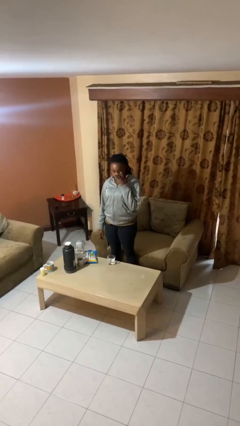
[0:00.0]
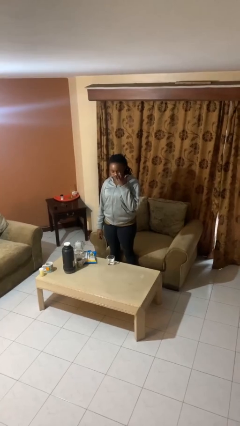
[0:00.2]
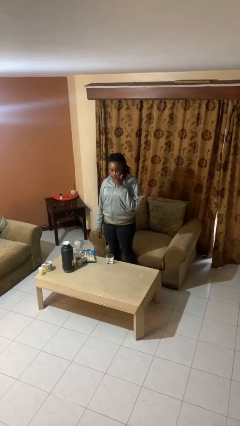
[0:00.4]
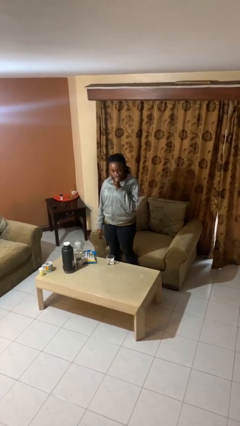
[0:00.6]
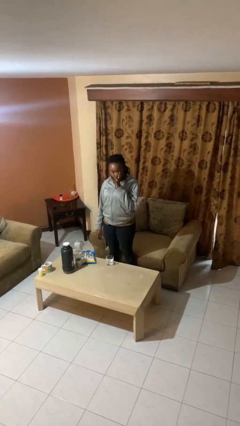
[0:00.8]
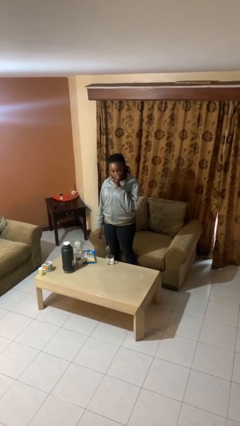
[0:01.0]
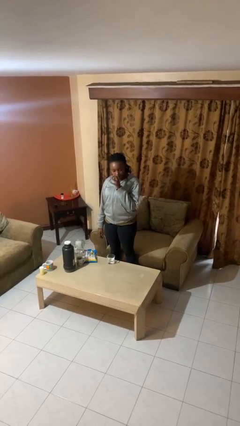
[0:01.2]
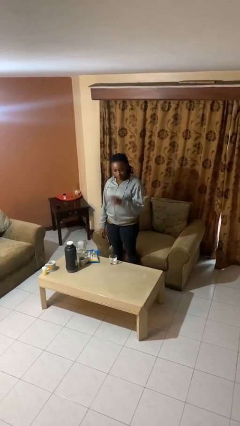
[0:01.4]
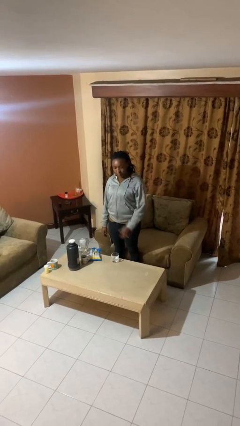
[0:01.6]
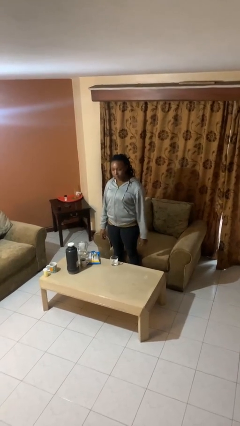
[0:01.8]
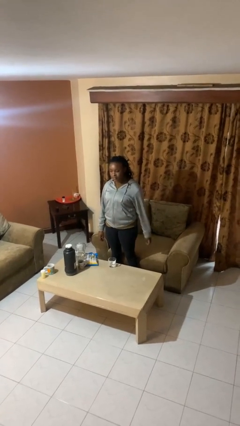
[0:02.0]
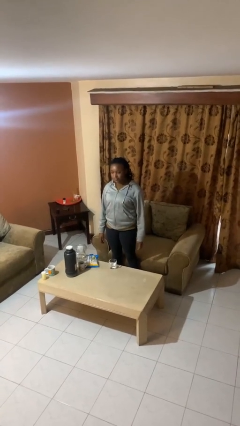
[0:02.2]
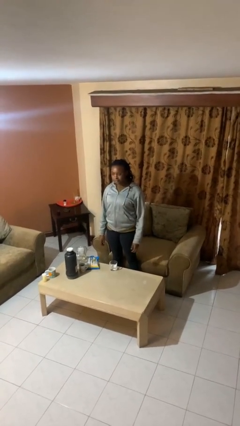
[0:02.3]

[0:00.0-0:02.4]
person licks fingers

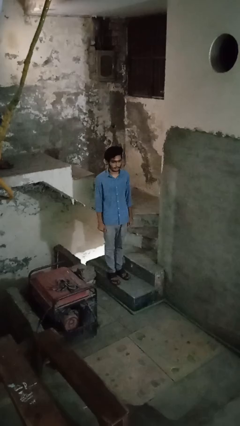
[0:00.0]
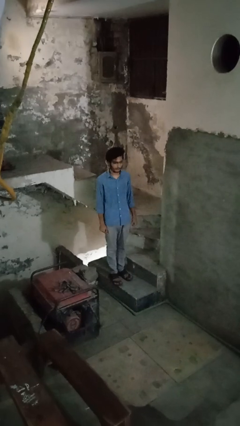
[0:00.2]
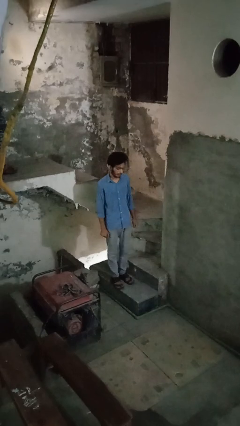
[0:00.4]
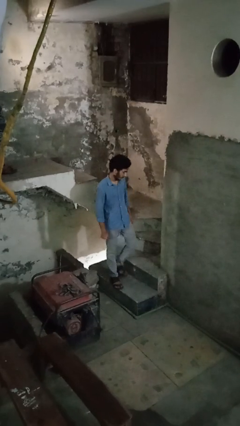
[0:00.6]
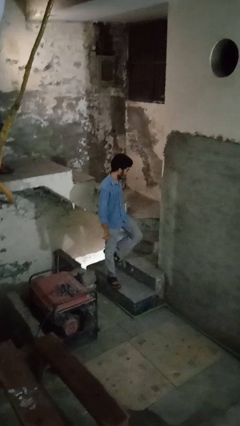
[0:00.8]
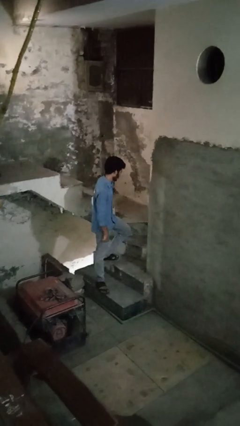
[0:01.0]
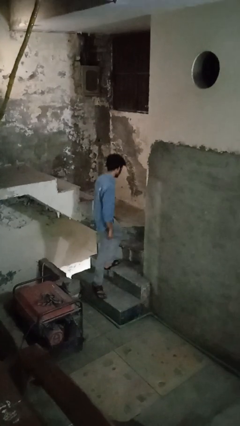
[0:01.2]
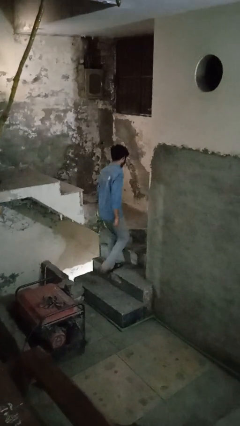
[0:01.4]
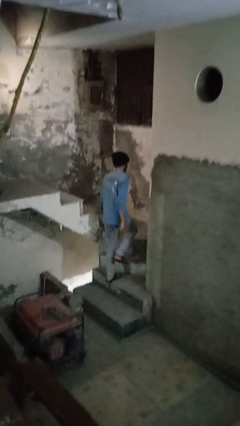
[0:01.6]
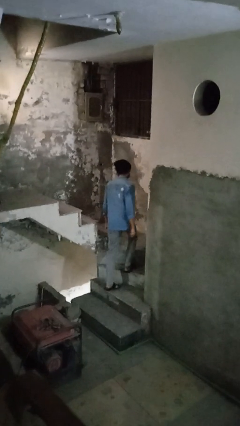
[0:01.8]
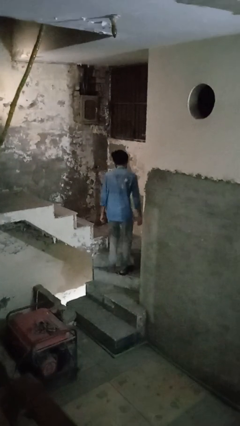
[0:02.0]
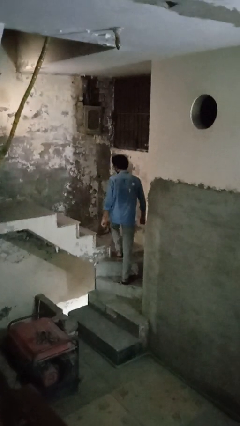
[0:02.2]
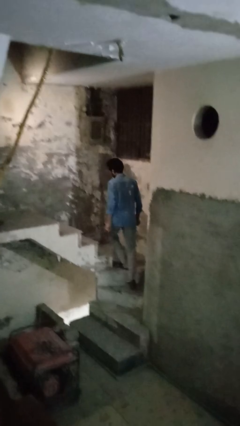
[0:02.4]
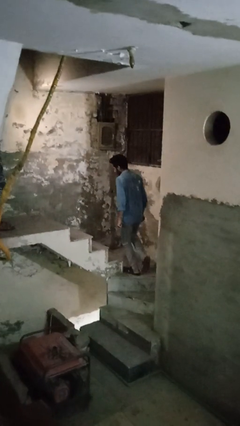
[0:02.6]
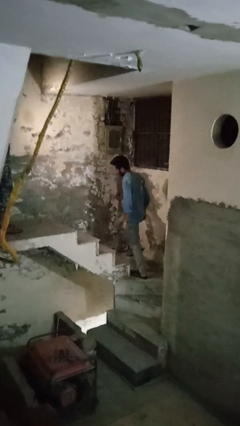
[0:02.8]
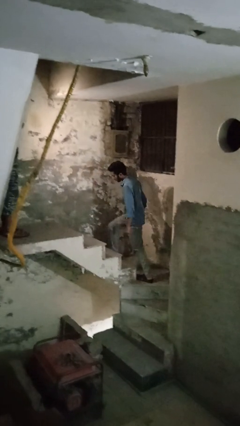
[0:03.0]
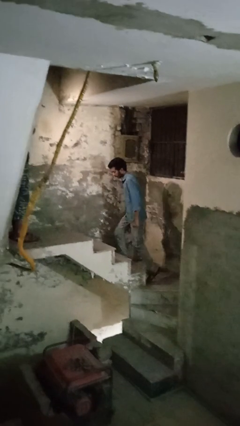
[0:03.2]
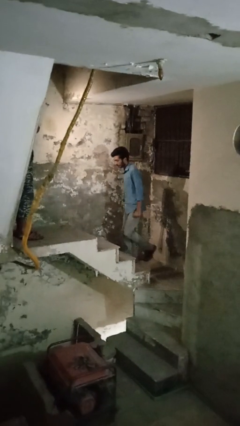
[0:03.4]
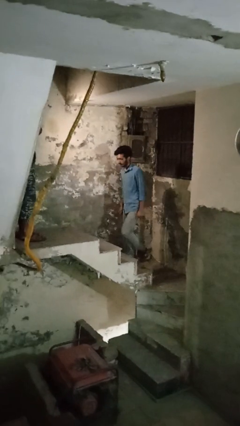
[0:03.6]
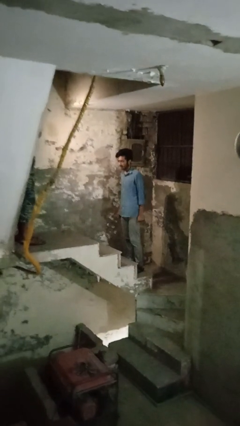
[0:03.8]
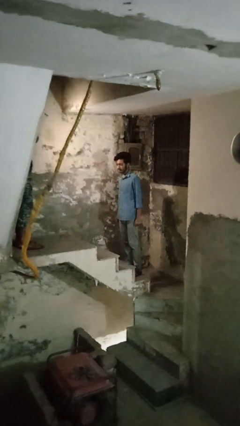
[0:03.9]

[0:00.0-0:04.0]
person climbs up stairs

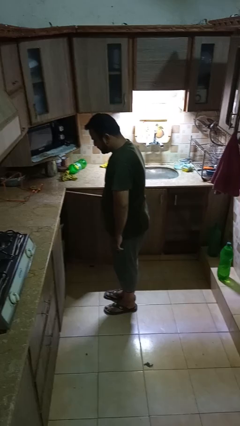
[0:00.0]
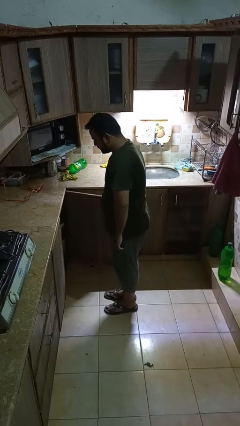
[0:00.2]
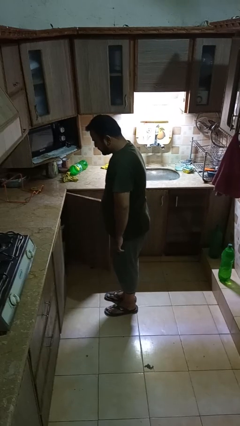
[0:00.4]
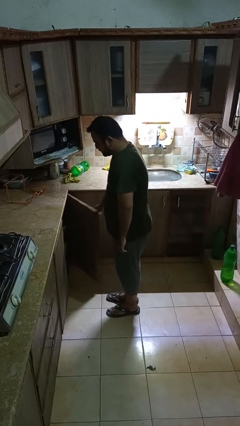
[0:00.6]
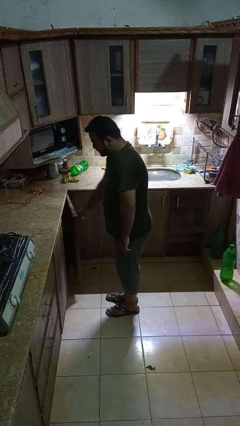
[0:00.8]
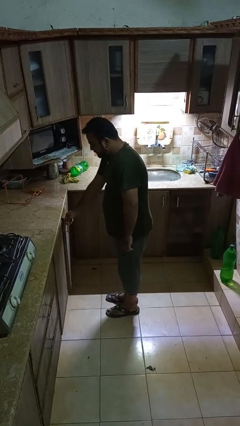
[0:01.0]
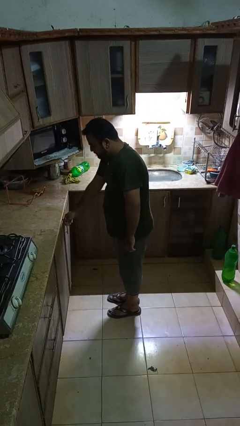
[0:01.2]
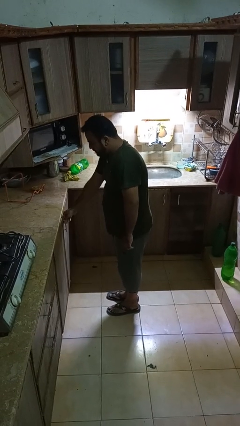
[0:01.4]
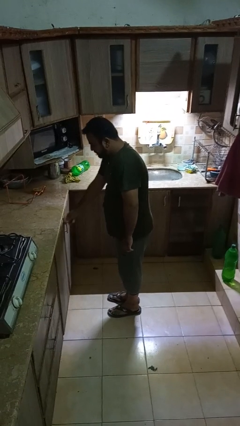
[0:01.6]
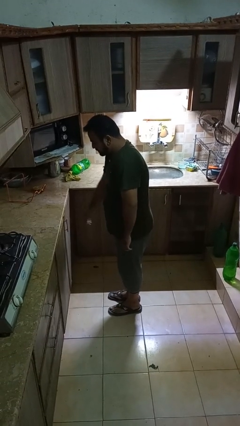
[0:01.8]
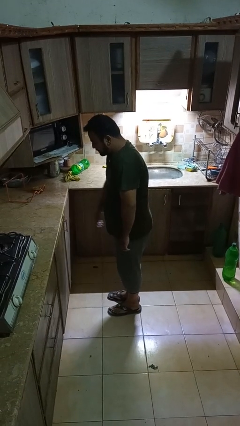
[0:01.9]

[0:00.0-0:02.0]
person closes cabinet

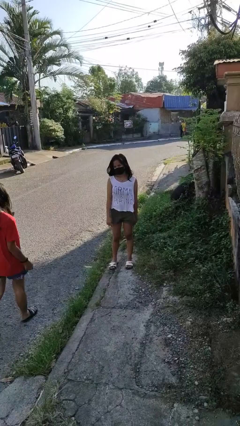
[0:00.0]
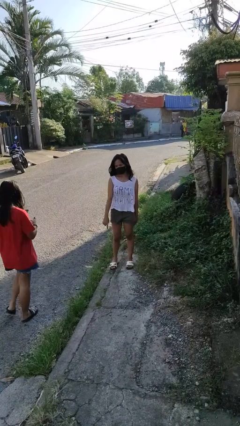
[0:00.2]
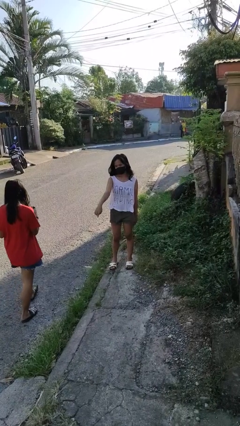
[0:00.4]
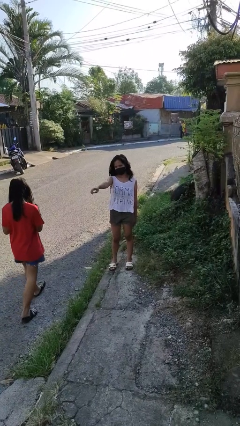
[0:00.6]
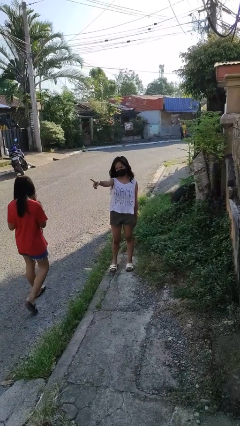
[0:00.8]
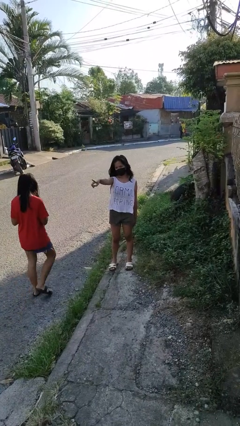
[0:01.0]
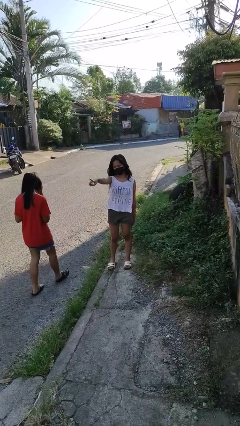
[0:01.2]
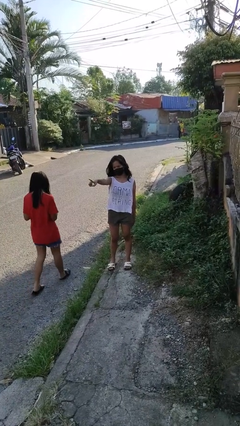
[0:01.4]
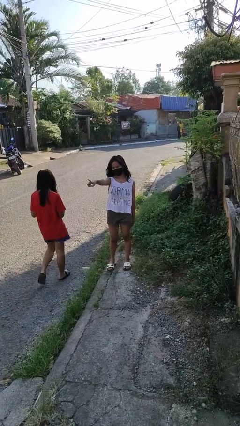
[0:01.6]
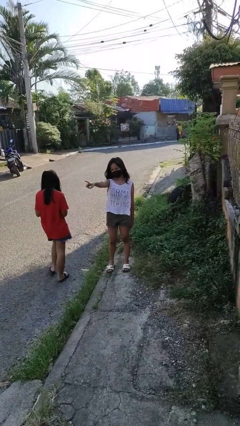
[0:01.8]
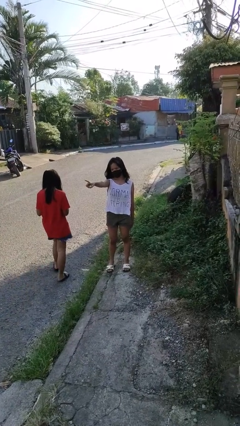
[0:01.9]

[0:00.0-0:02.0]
person points at person

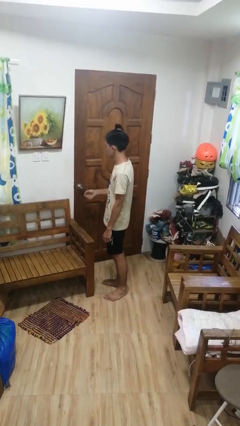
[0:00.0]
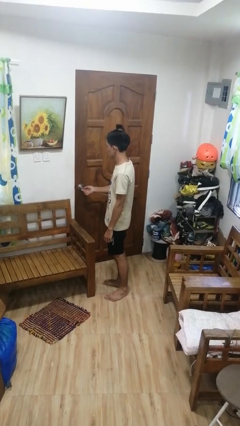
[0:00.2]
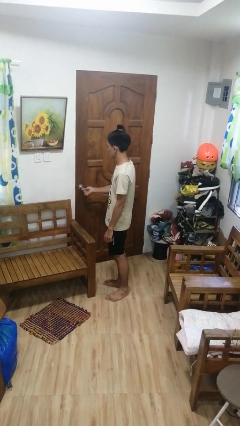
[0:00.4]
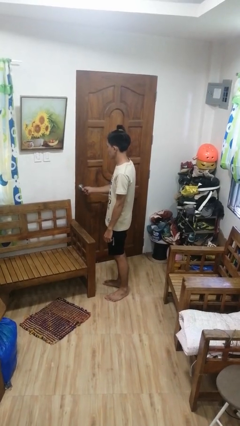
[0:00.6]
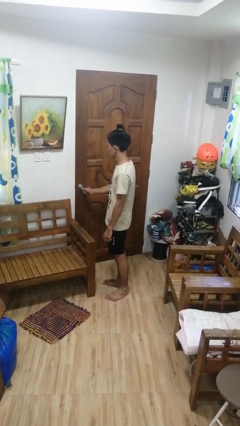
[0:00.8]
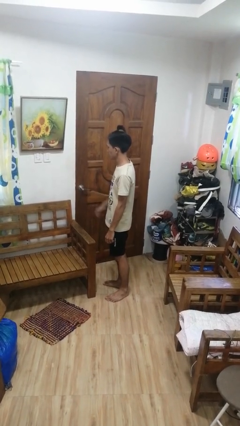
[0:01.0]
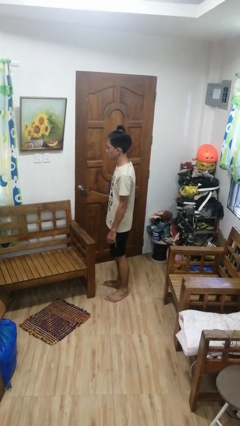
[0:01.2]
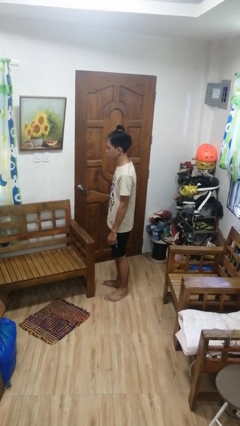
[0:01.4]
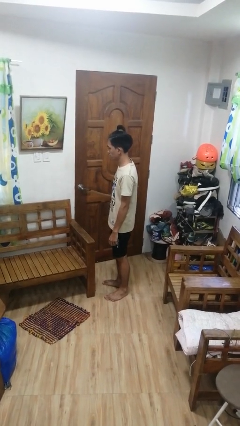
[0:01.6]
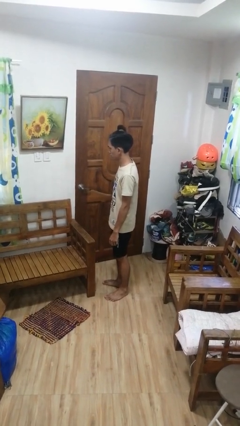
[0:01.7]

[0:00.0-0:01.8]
person locks door with keys

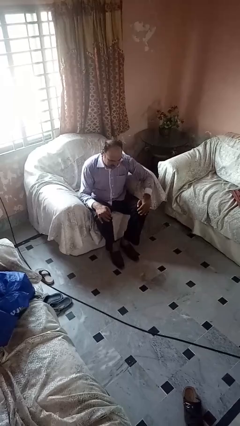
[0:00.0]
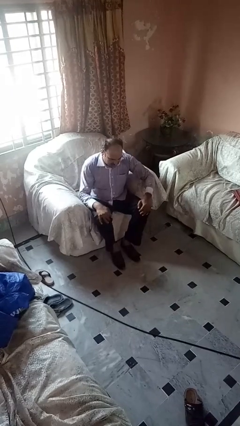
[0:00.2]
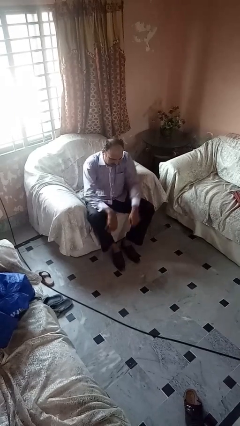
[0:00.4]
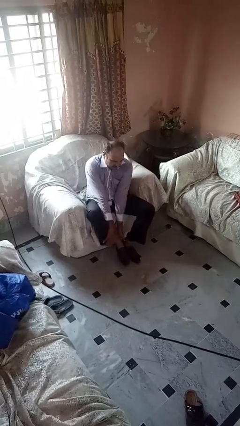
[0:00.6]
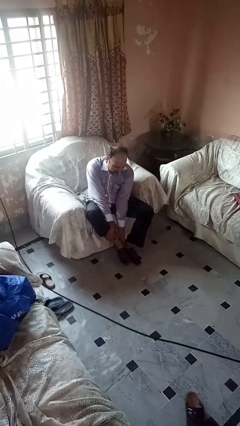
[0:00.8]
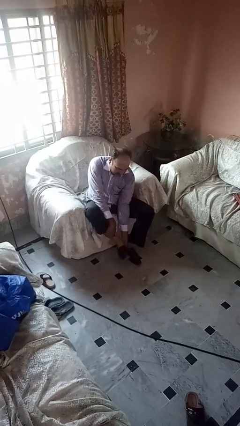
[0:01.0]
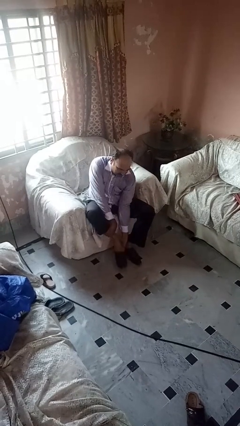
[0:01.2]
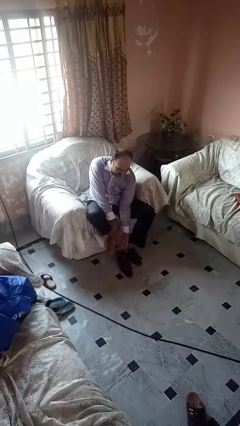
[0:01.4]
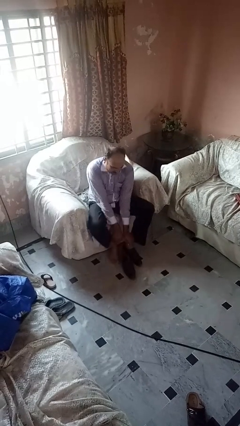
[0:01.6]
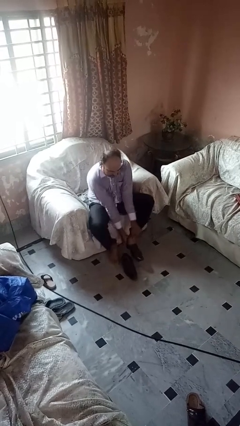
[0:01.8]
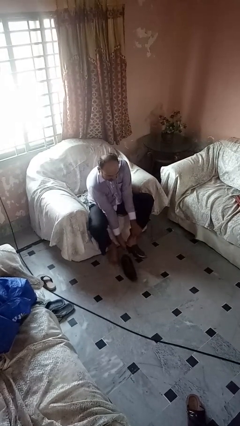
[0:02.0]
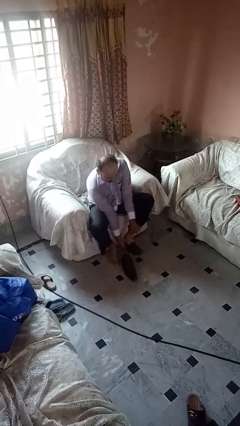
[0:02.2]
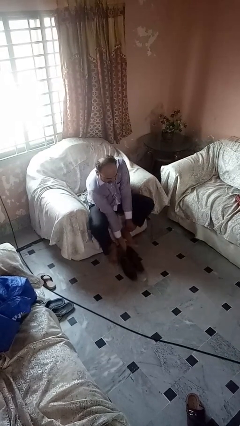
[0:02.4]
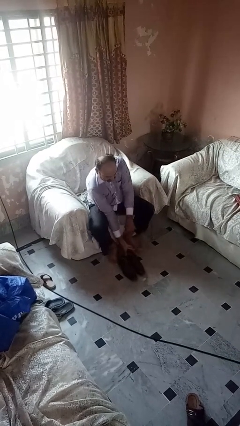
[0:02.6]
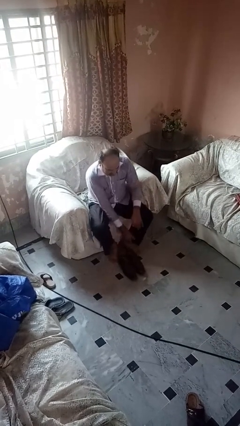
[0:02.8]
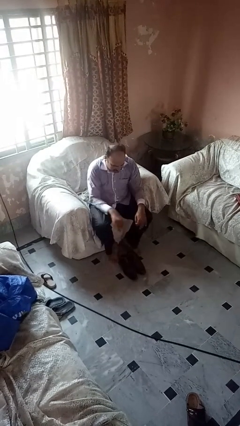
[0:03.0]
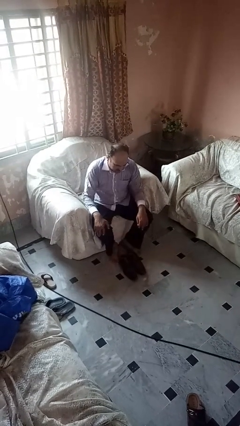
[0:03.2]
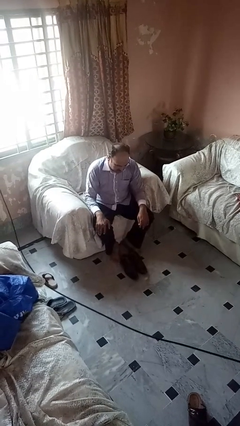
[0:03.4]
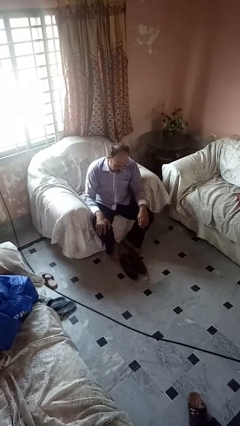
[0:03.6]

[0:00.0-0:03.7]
person takes off boots

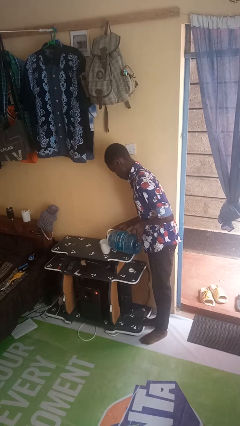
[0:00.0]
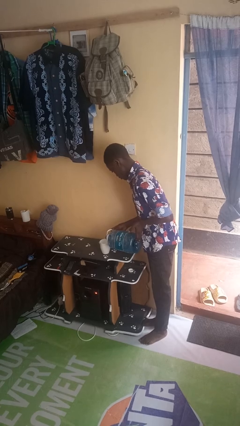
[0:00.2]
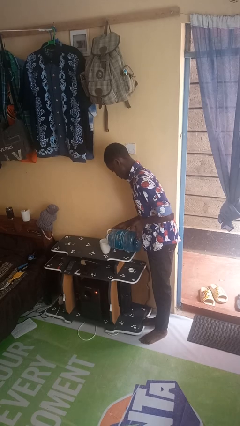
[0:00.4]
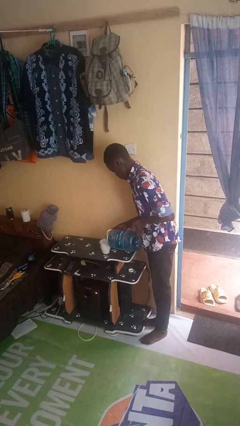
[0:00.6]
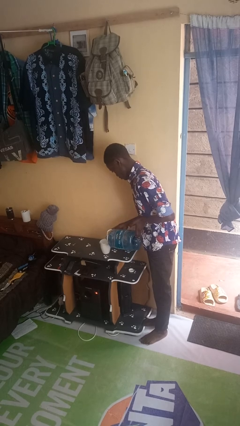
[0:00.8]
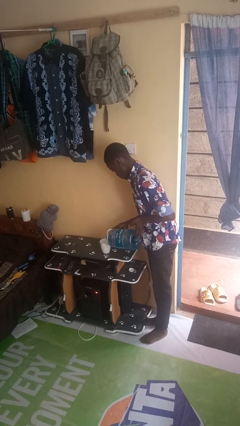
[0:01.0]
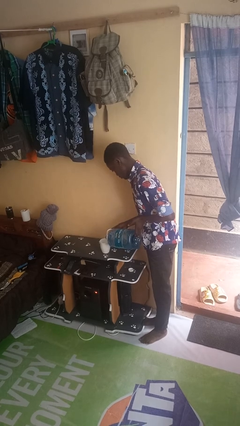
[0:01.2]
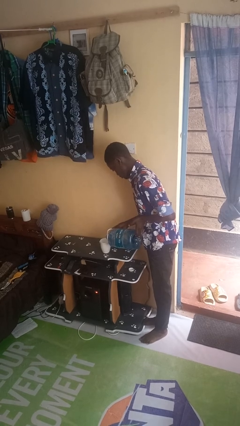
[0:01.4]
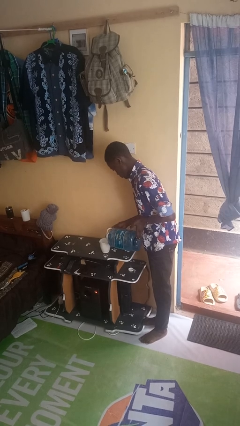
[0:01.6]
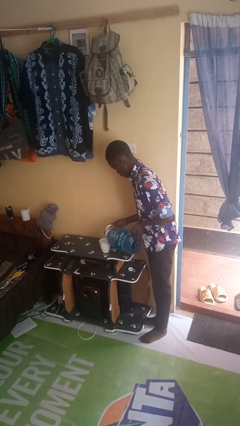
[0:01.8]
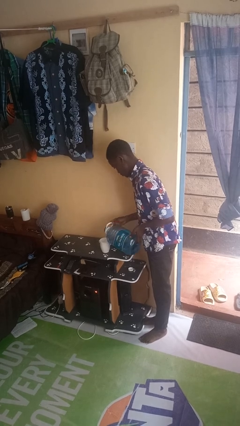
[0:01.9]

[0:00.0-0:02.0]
person pours liquid into cup
